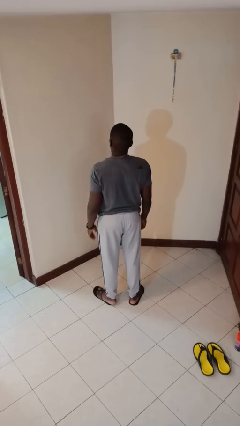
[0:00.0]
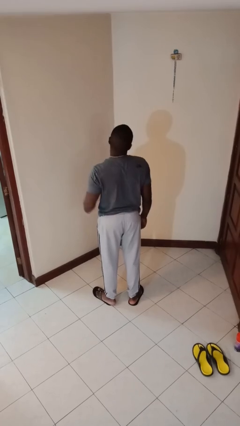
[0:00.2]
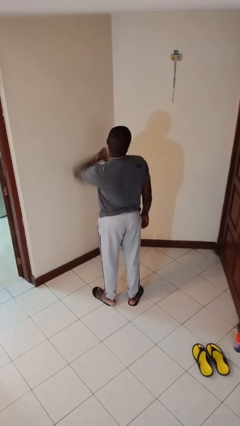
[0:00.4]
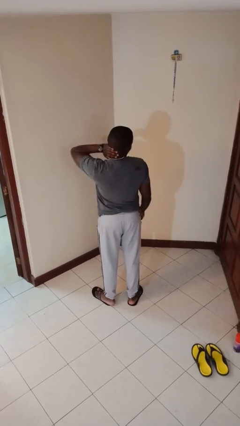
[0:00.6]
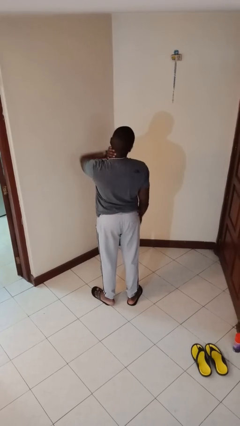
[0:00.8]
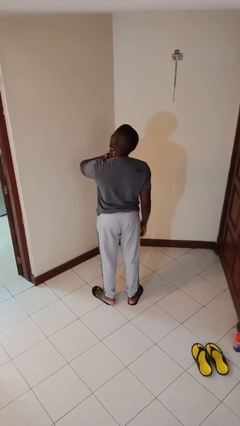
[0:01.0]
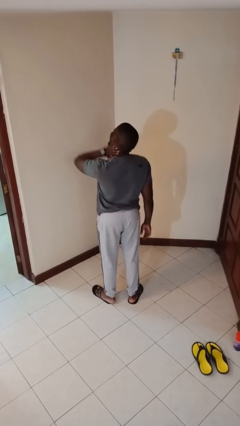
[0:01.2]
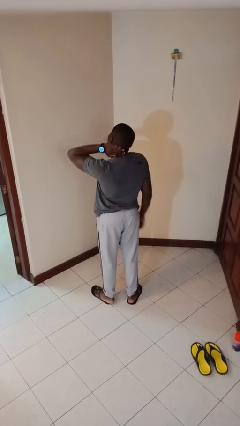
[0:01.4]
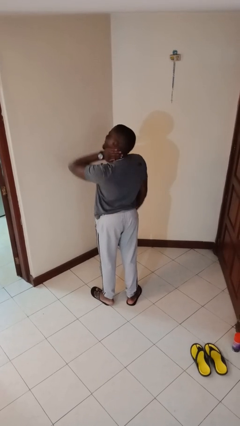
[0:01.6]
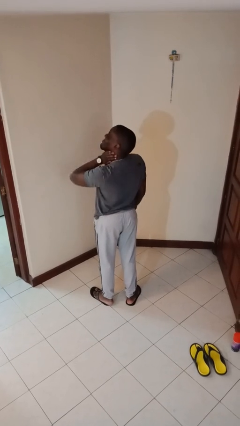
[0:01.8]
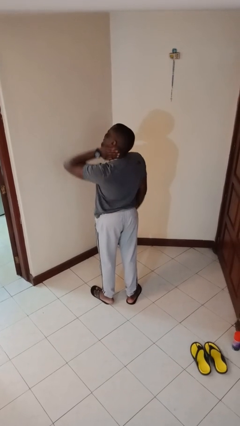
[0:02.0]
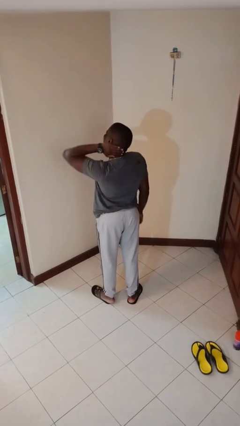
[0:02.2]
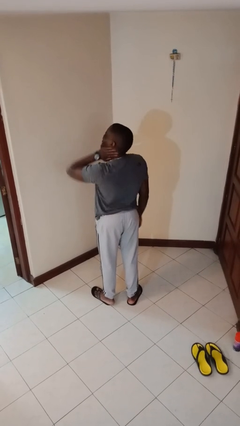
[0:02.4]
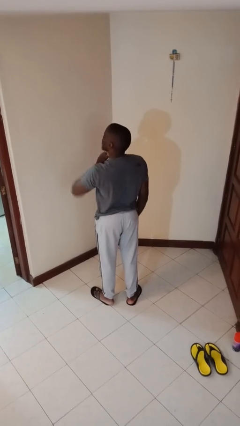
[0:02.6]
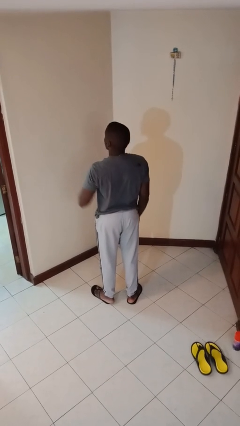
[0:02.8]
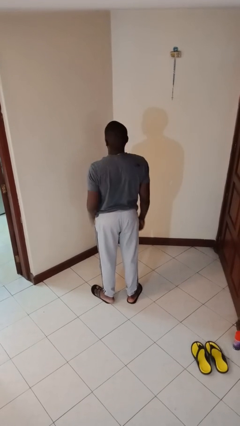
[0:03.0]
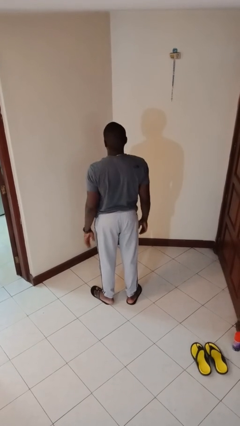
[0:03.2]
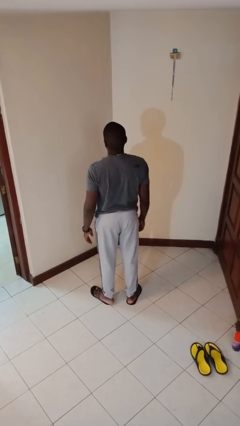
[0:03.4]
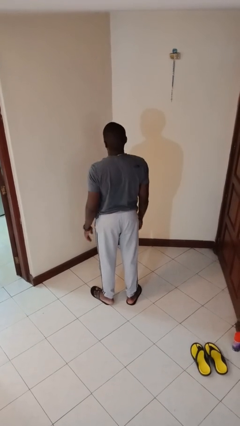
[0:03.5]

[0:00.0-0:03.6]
person rubs neck

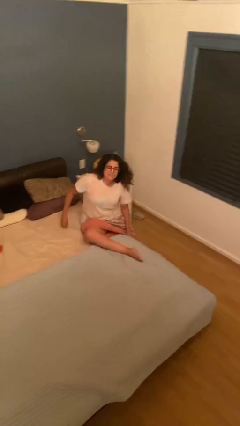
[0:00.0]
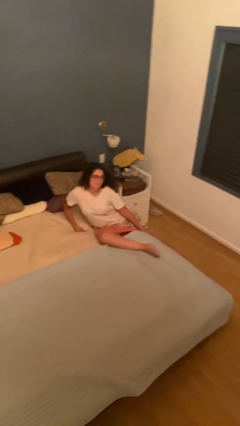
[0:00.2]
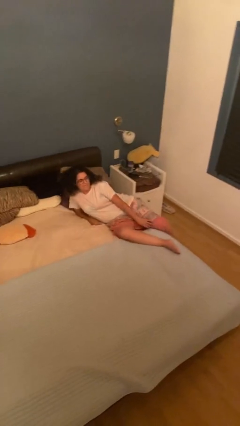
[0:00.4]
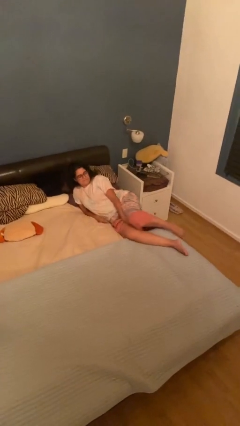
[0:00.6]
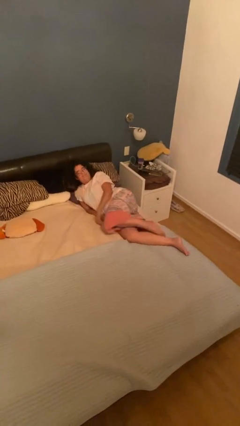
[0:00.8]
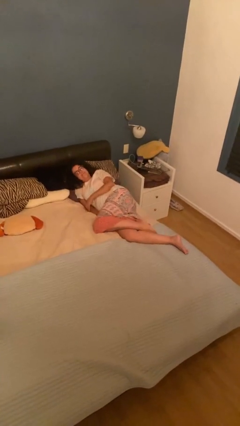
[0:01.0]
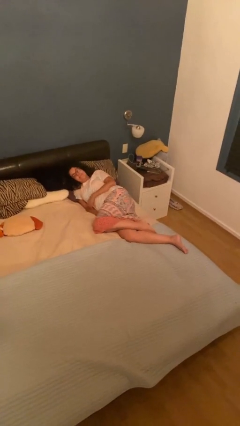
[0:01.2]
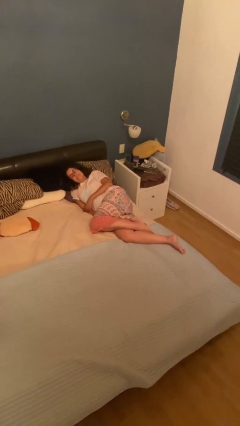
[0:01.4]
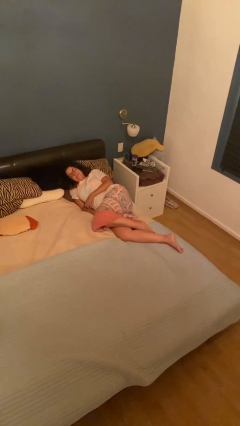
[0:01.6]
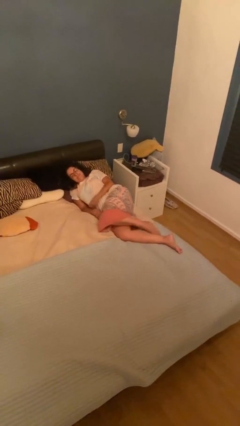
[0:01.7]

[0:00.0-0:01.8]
person lies down on bed

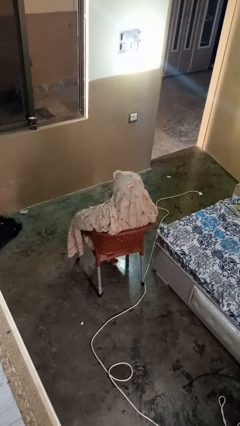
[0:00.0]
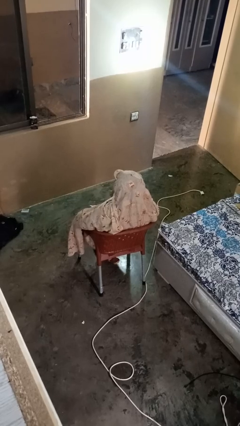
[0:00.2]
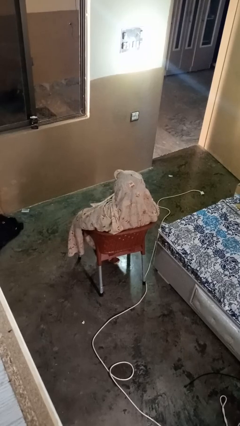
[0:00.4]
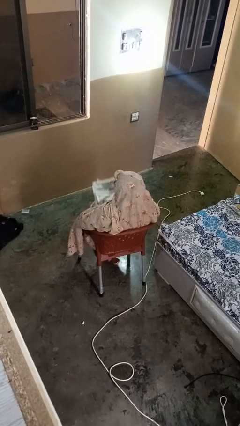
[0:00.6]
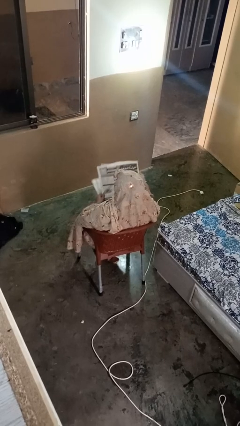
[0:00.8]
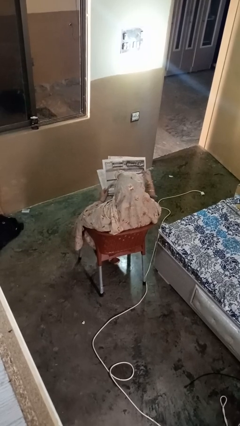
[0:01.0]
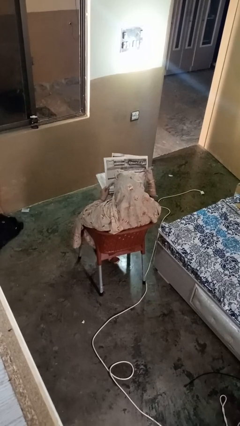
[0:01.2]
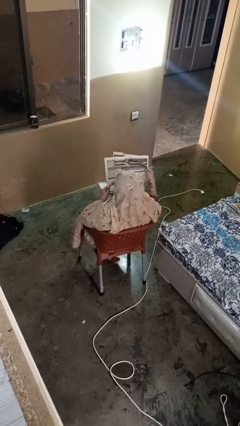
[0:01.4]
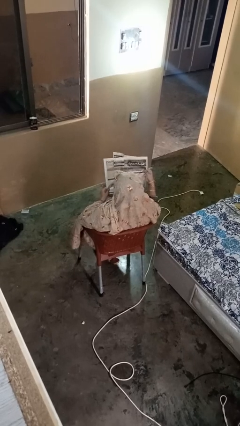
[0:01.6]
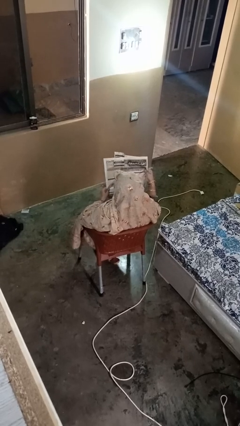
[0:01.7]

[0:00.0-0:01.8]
person reads newspaper

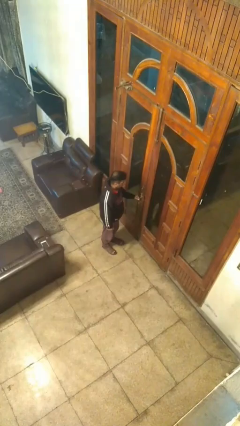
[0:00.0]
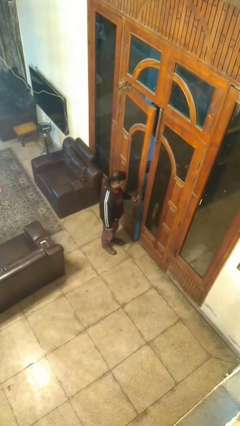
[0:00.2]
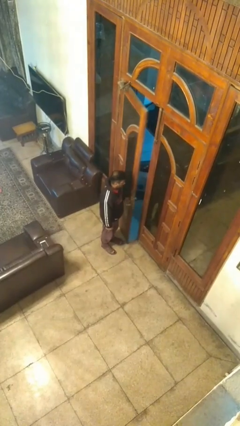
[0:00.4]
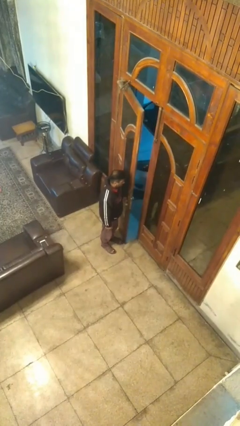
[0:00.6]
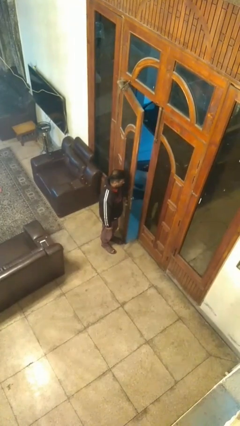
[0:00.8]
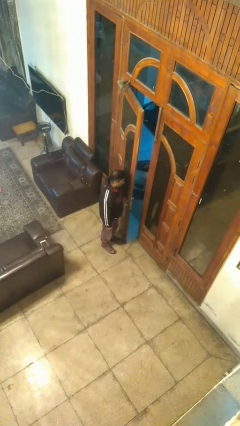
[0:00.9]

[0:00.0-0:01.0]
person opens facility door

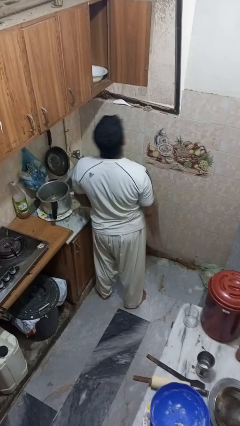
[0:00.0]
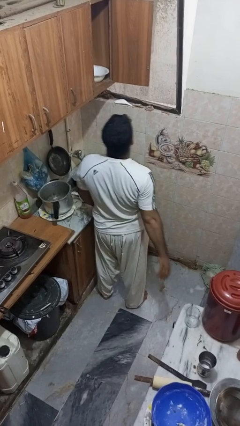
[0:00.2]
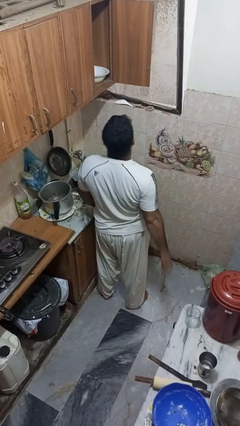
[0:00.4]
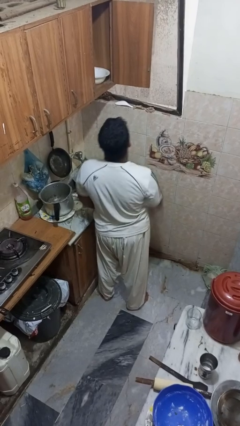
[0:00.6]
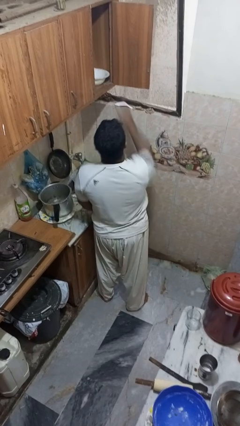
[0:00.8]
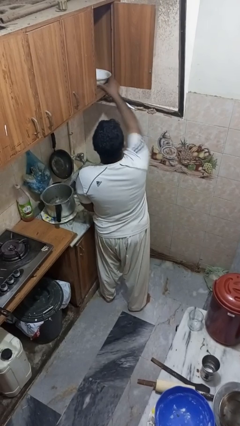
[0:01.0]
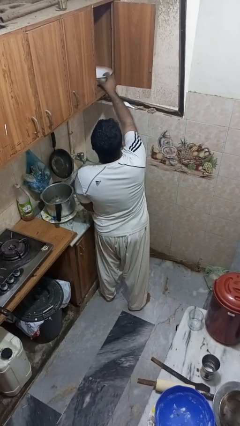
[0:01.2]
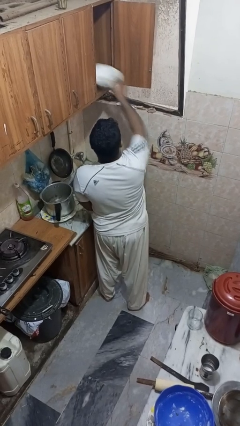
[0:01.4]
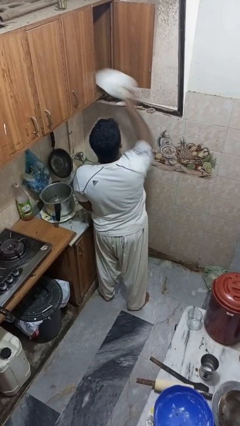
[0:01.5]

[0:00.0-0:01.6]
person takes object from cabinet

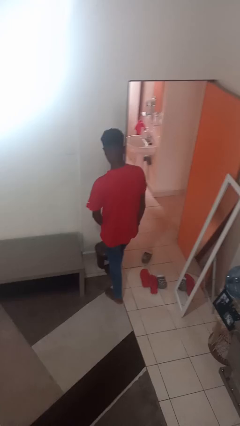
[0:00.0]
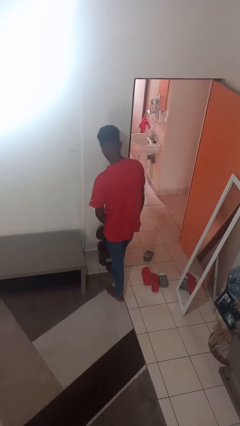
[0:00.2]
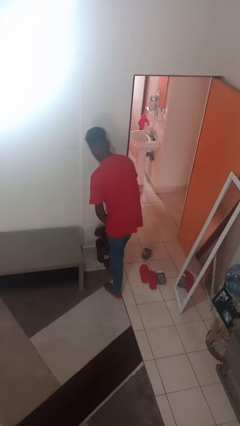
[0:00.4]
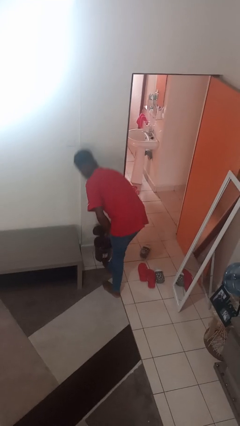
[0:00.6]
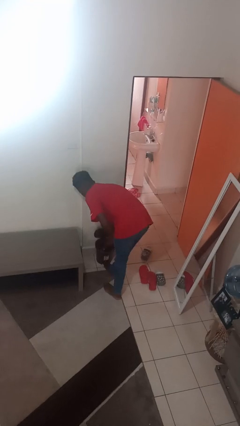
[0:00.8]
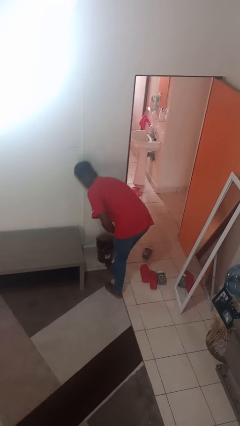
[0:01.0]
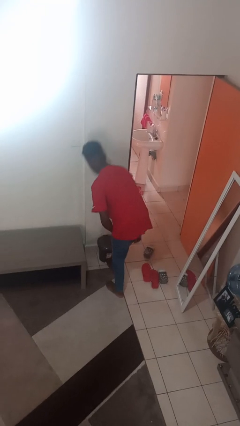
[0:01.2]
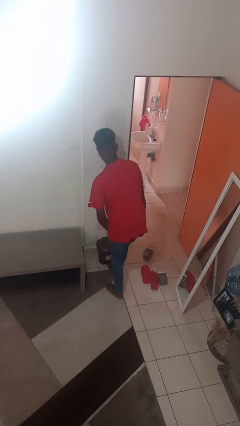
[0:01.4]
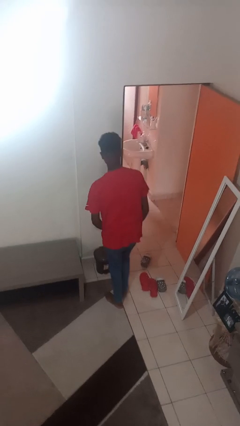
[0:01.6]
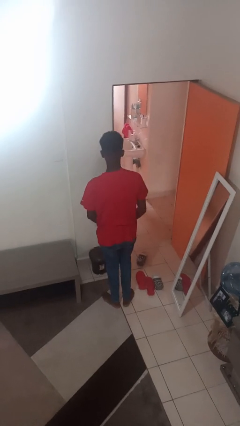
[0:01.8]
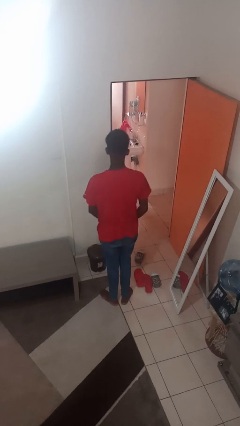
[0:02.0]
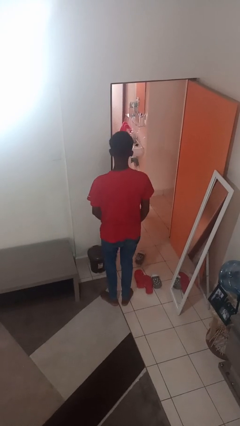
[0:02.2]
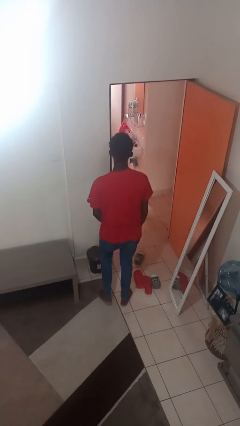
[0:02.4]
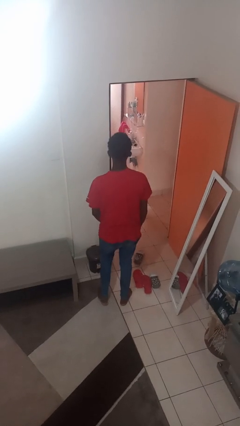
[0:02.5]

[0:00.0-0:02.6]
person discards trash

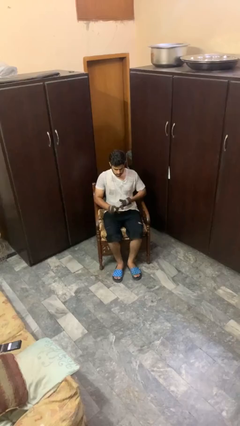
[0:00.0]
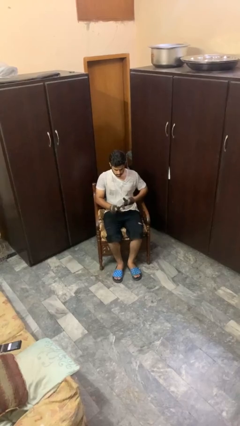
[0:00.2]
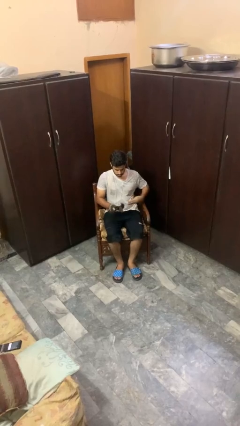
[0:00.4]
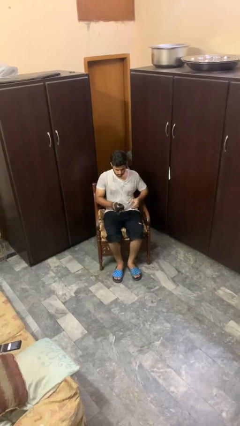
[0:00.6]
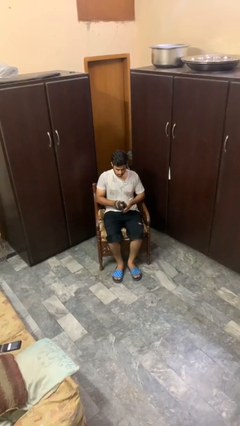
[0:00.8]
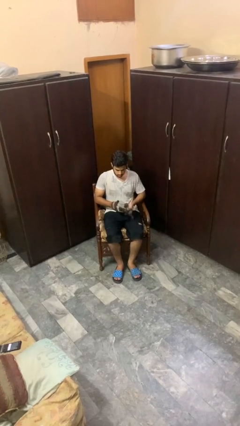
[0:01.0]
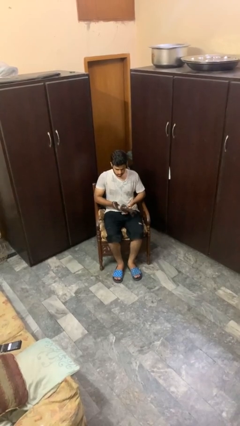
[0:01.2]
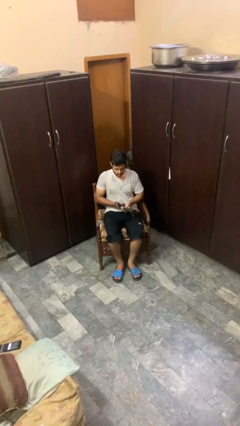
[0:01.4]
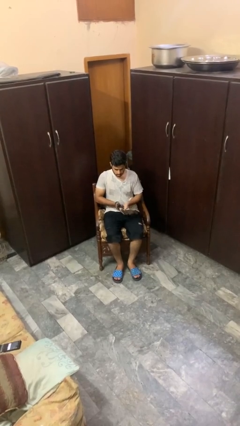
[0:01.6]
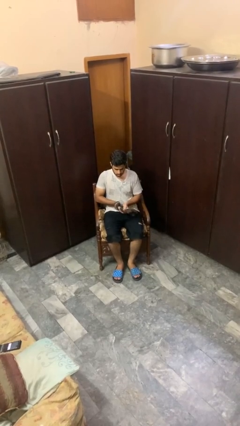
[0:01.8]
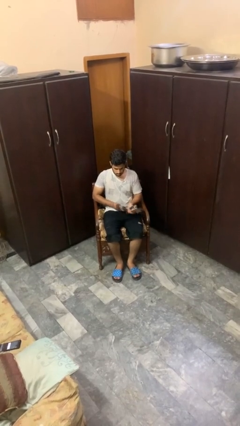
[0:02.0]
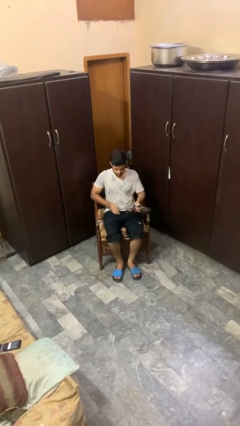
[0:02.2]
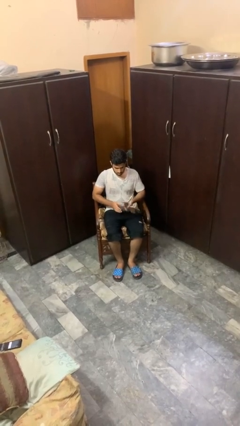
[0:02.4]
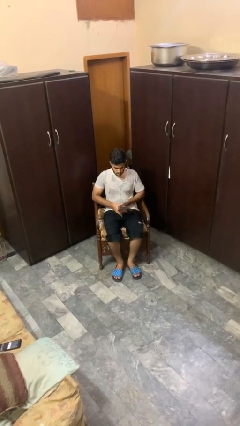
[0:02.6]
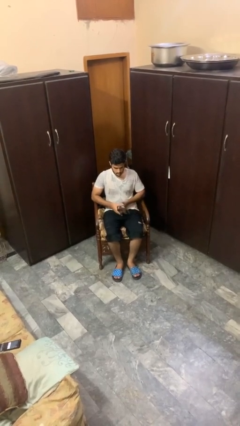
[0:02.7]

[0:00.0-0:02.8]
person takes off gloves

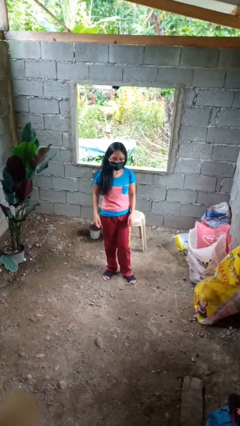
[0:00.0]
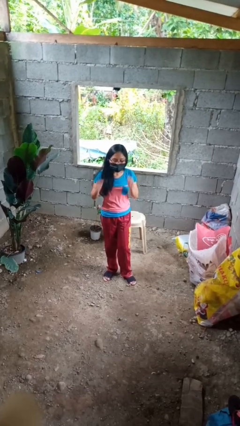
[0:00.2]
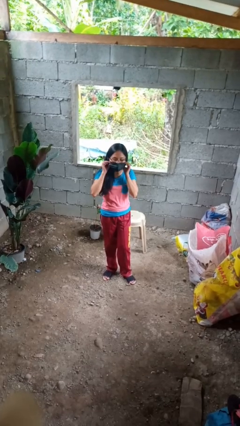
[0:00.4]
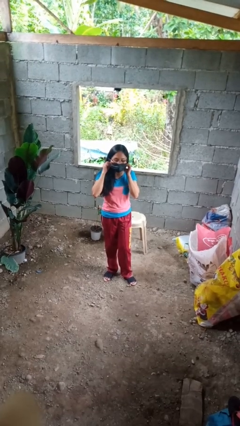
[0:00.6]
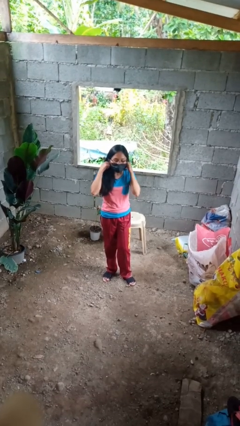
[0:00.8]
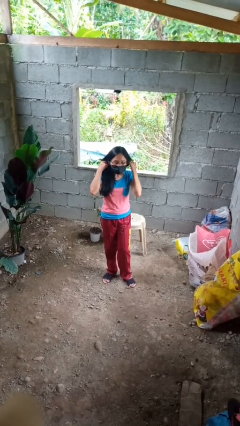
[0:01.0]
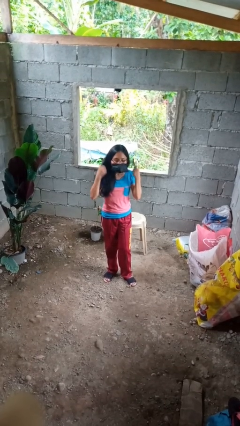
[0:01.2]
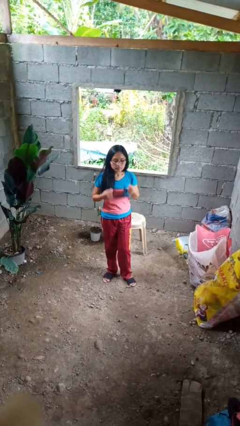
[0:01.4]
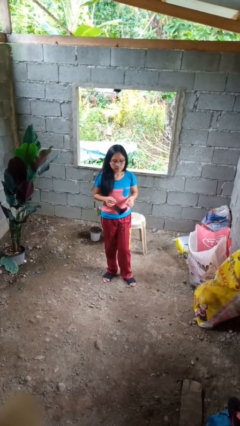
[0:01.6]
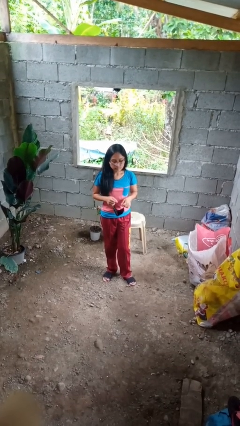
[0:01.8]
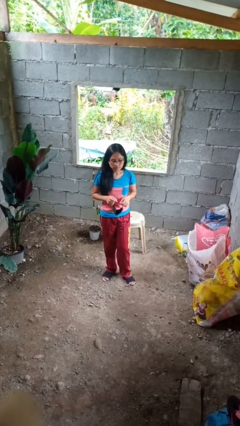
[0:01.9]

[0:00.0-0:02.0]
person takes off facemask
